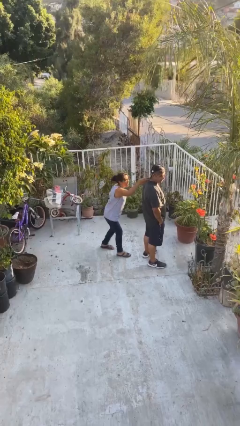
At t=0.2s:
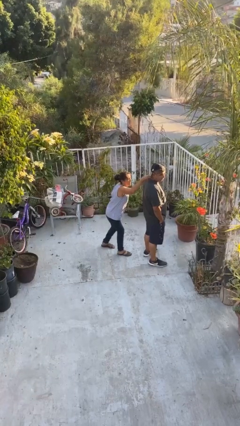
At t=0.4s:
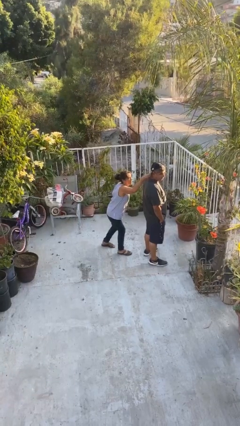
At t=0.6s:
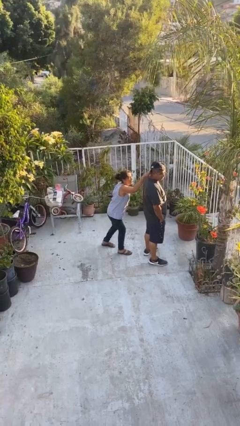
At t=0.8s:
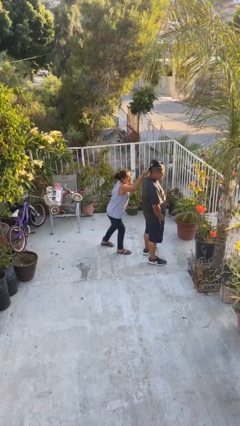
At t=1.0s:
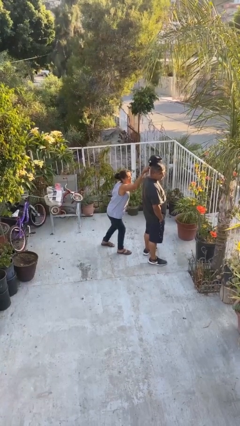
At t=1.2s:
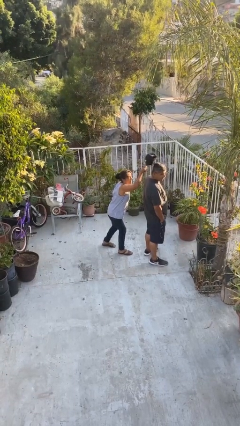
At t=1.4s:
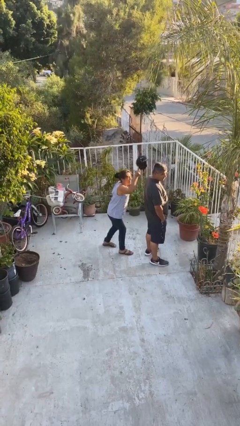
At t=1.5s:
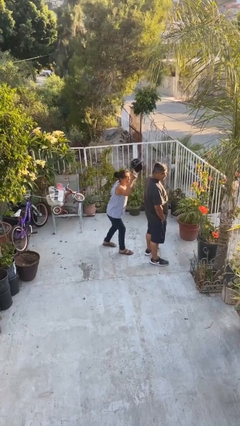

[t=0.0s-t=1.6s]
person steals object from person

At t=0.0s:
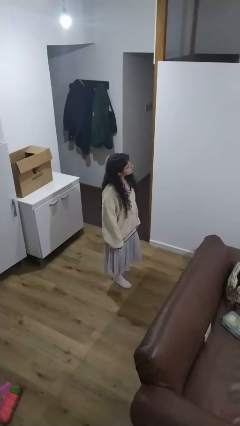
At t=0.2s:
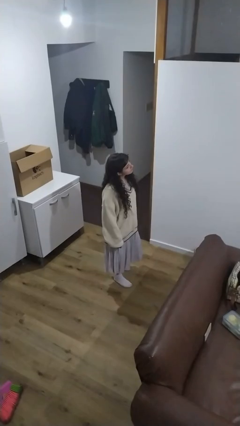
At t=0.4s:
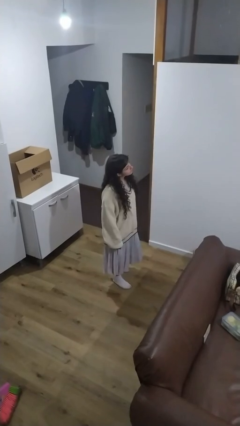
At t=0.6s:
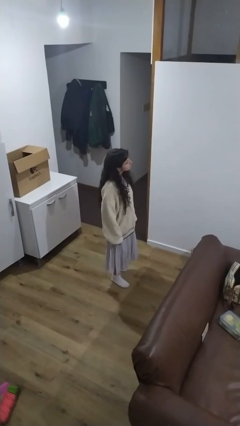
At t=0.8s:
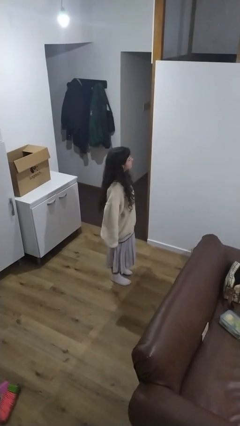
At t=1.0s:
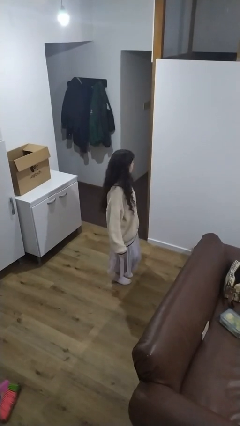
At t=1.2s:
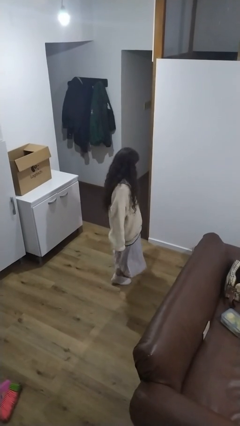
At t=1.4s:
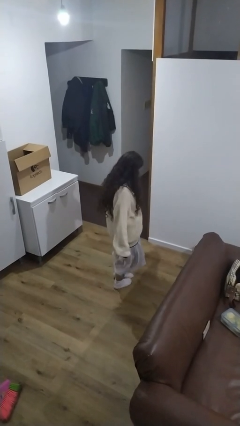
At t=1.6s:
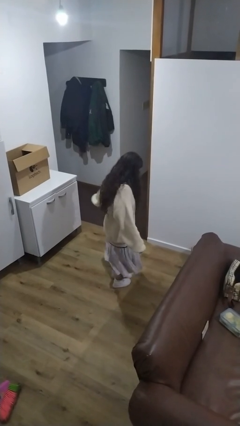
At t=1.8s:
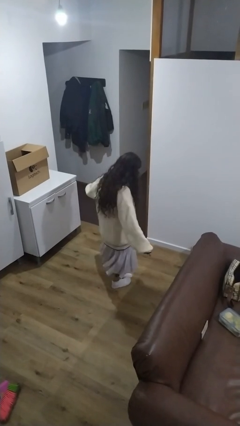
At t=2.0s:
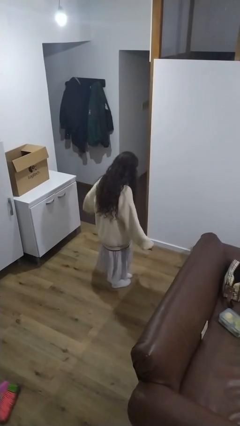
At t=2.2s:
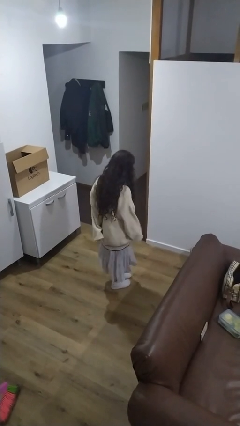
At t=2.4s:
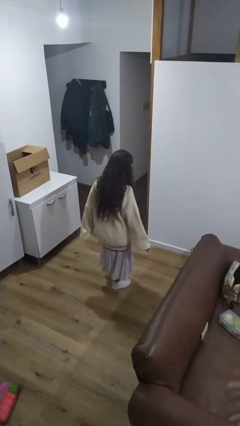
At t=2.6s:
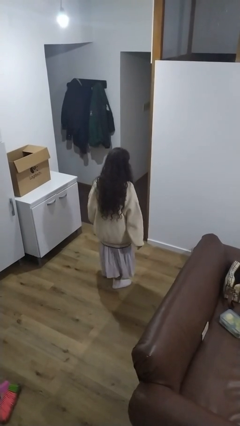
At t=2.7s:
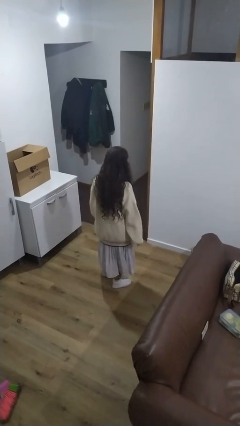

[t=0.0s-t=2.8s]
person wiggles hips

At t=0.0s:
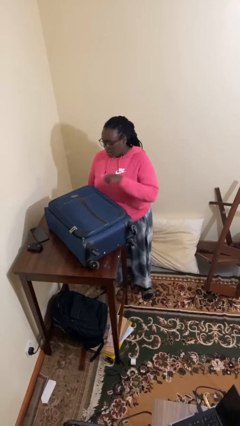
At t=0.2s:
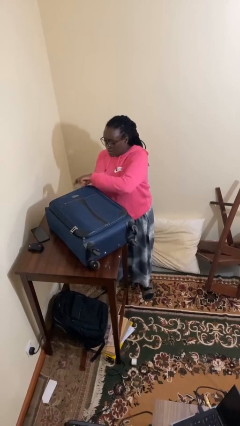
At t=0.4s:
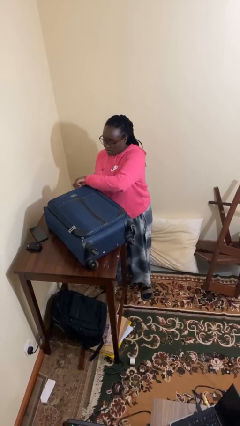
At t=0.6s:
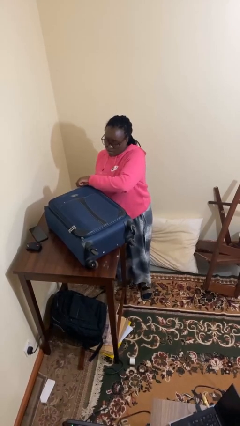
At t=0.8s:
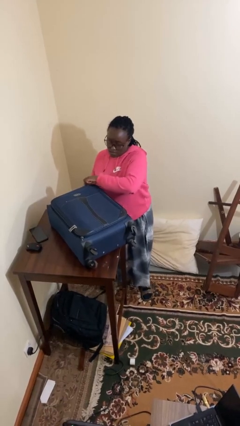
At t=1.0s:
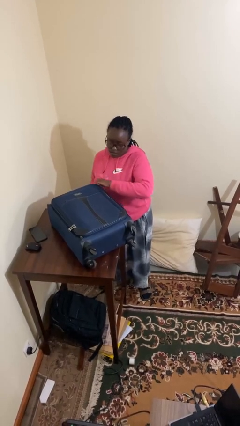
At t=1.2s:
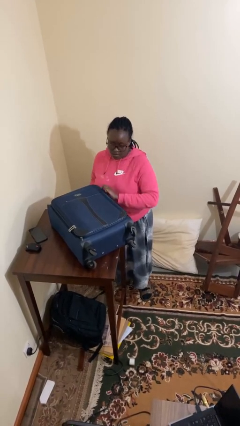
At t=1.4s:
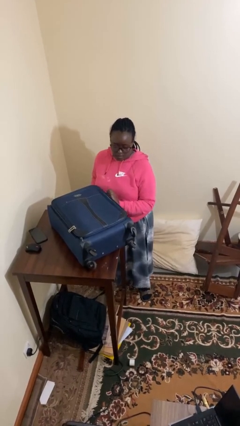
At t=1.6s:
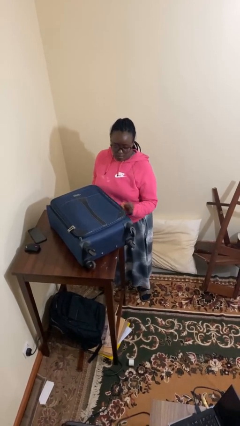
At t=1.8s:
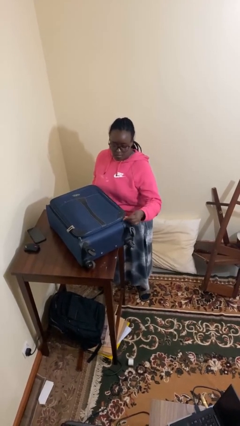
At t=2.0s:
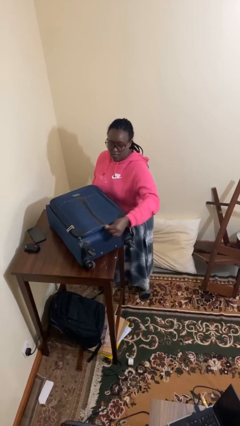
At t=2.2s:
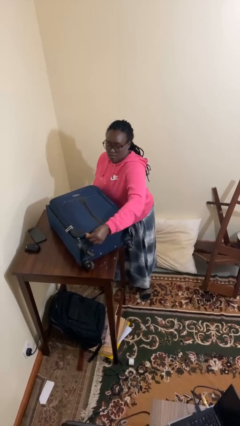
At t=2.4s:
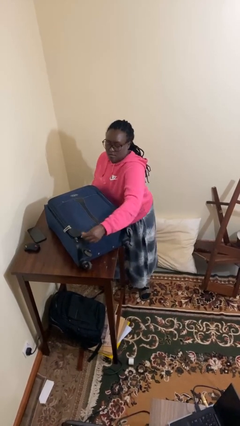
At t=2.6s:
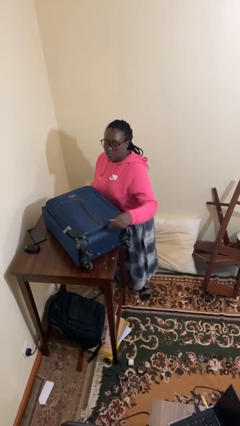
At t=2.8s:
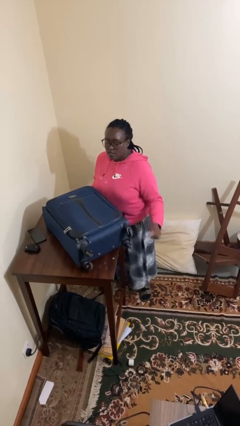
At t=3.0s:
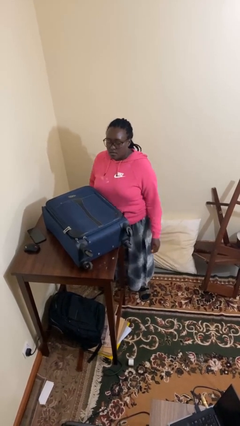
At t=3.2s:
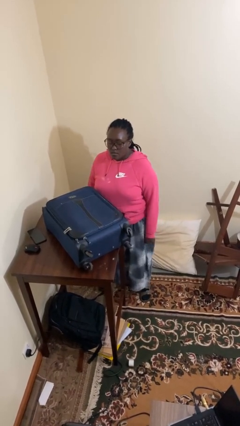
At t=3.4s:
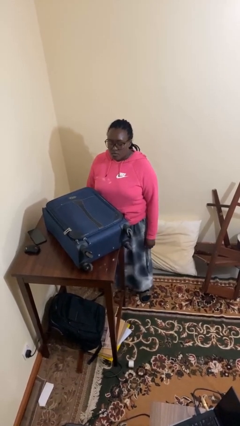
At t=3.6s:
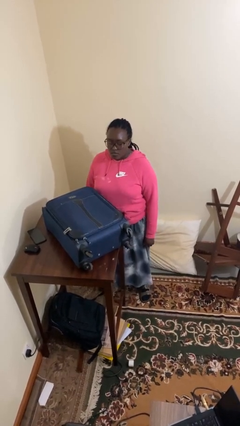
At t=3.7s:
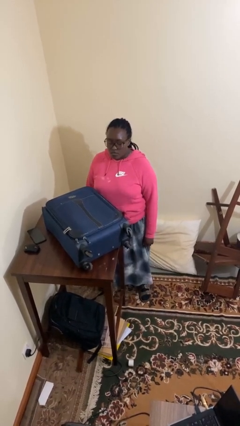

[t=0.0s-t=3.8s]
person closes suitcase

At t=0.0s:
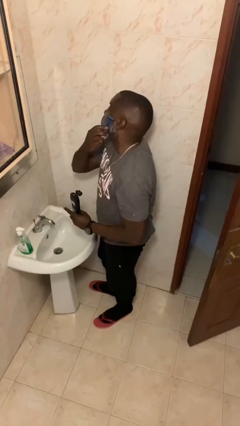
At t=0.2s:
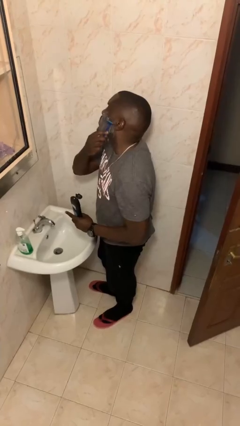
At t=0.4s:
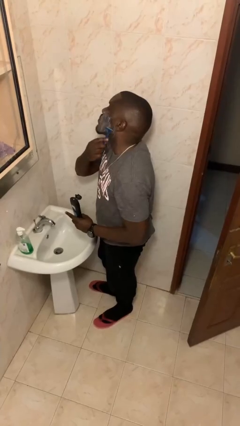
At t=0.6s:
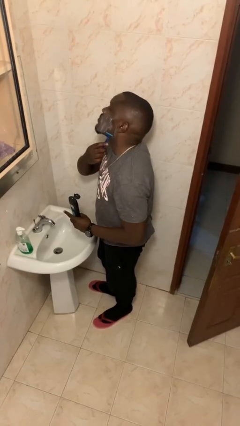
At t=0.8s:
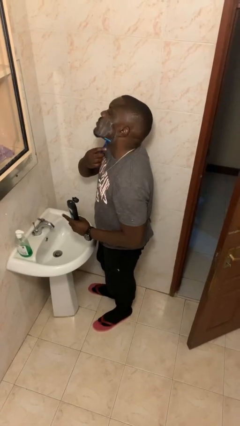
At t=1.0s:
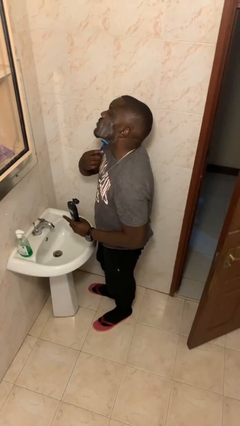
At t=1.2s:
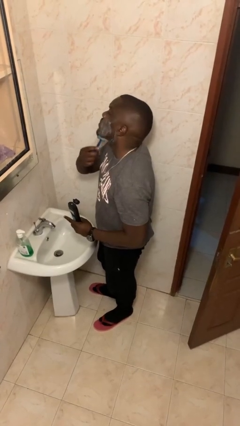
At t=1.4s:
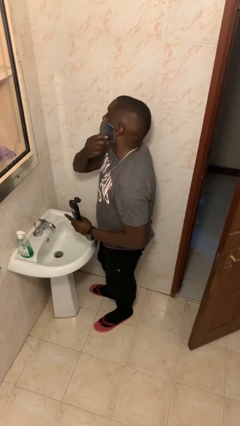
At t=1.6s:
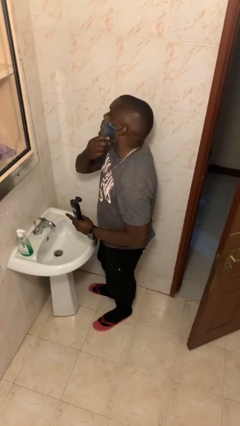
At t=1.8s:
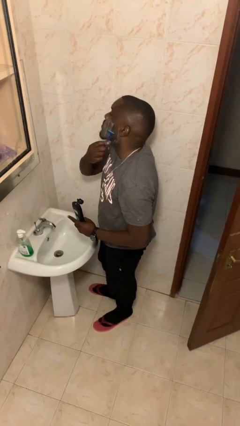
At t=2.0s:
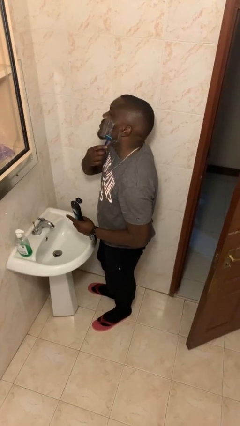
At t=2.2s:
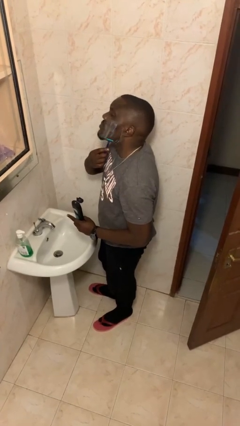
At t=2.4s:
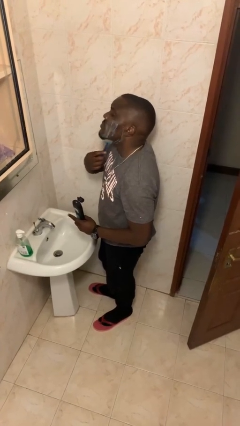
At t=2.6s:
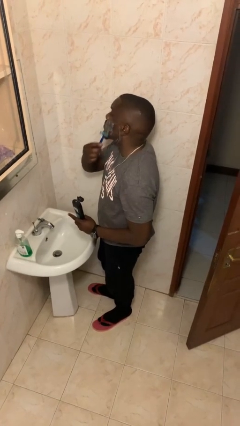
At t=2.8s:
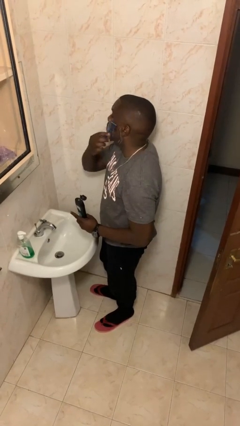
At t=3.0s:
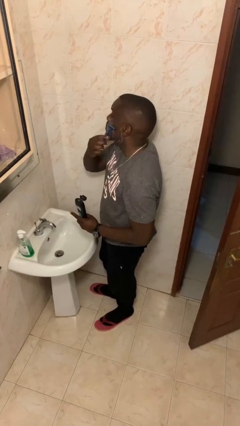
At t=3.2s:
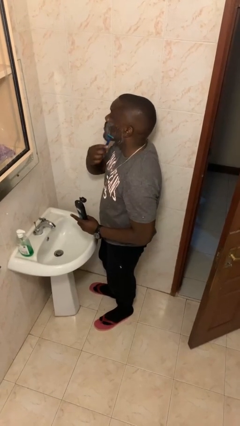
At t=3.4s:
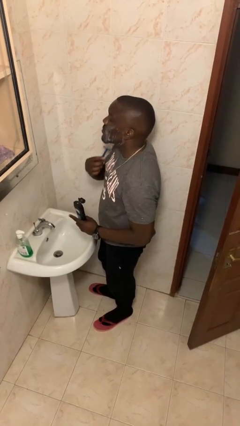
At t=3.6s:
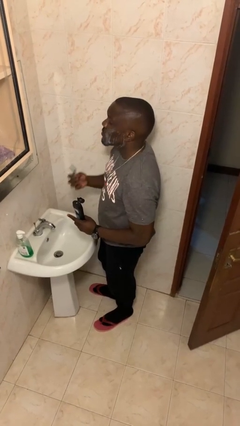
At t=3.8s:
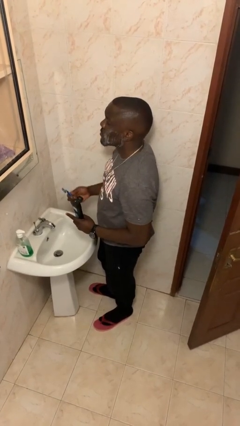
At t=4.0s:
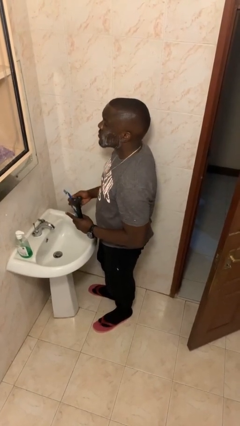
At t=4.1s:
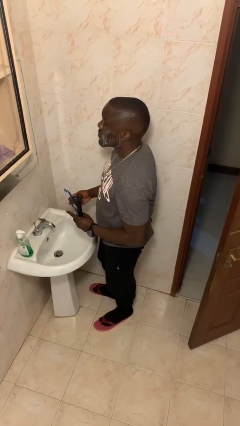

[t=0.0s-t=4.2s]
person shaves face

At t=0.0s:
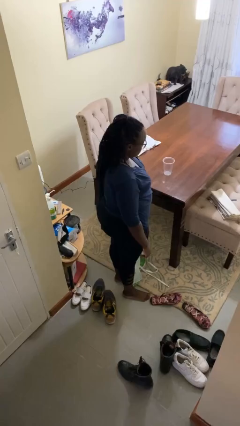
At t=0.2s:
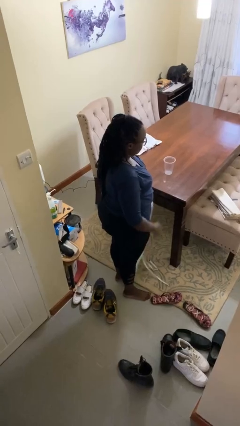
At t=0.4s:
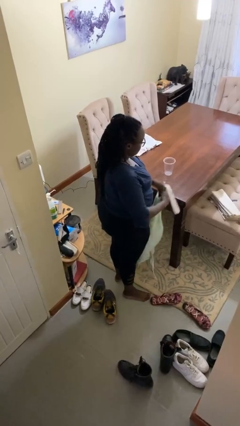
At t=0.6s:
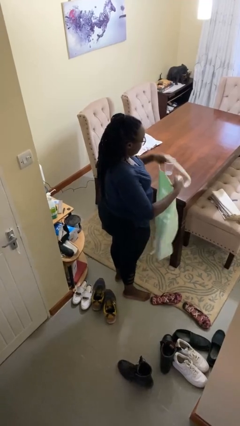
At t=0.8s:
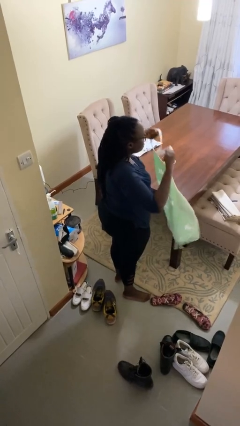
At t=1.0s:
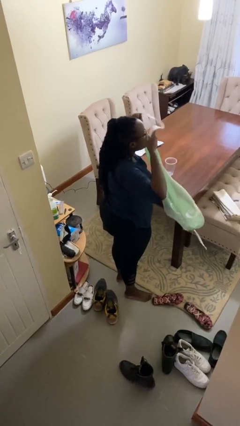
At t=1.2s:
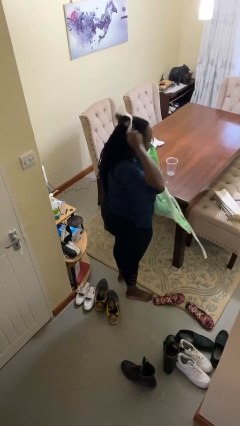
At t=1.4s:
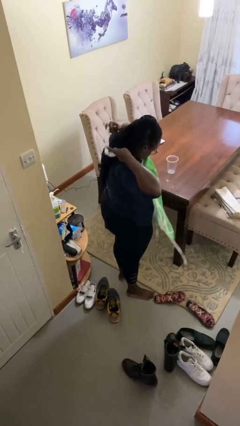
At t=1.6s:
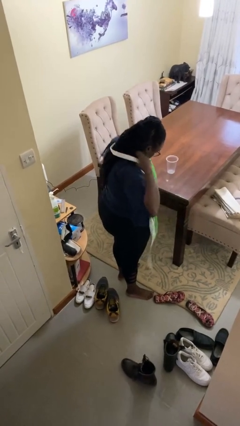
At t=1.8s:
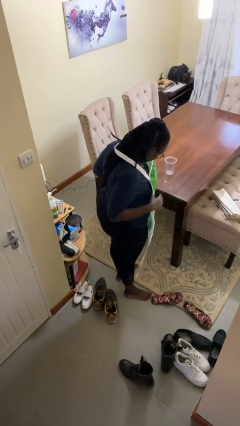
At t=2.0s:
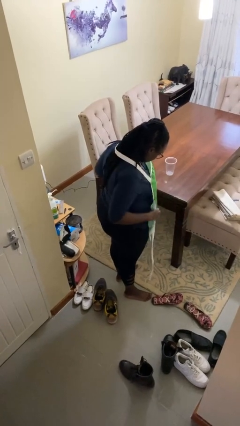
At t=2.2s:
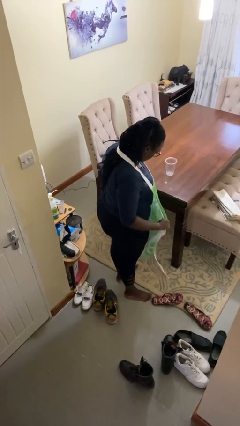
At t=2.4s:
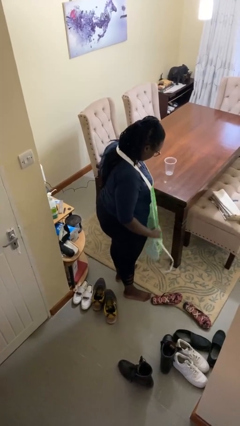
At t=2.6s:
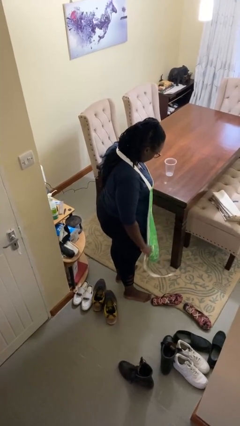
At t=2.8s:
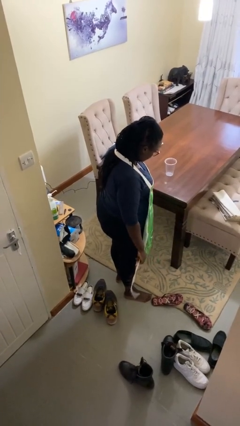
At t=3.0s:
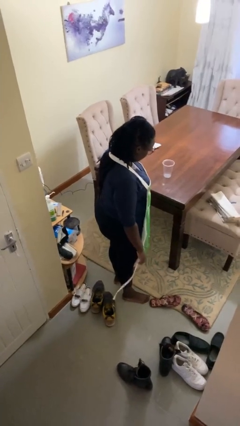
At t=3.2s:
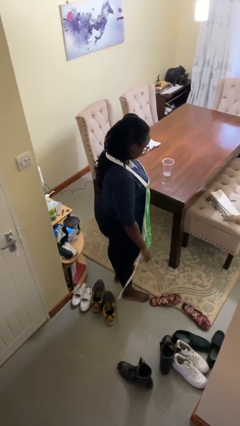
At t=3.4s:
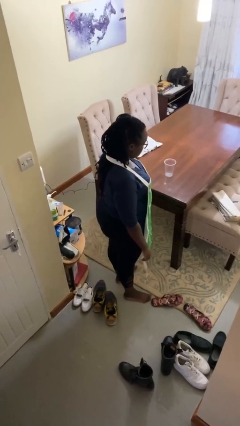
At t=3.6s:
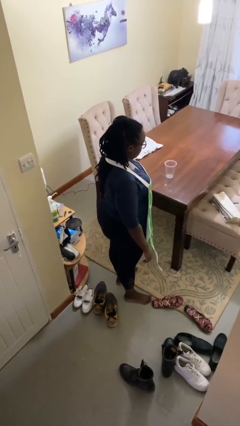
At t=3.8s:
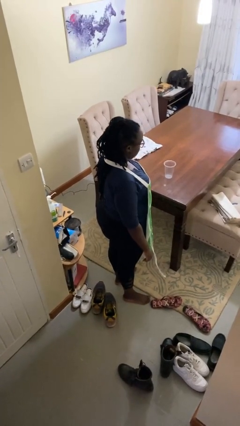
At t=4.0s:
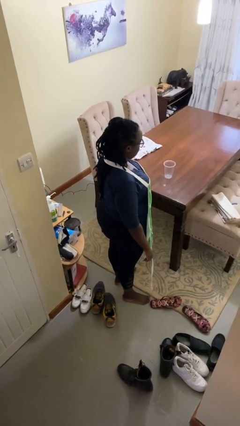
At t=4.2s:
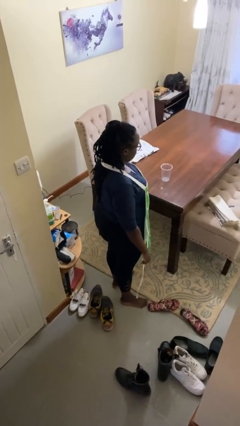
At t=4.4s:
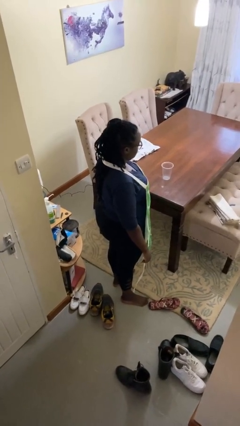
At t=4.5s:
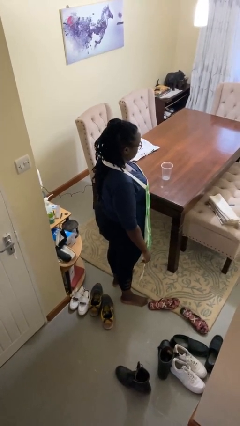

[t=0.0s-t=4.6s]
person puts on apron

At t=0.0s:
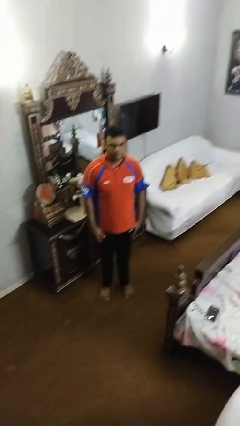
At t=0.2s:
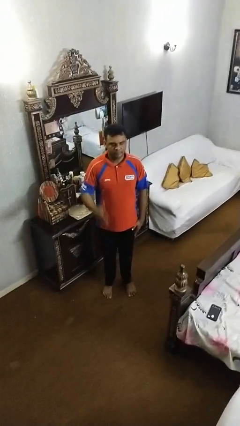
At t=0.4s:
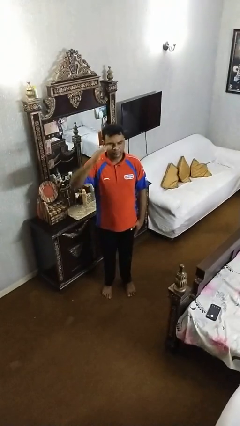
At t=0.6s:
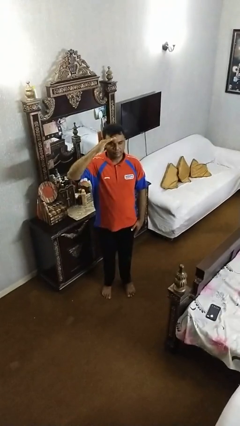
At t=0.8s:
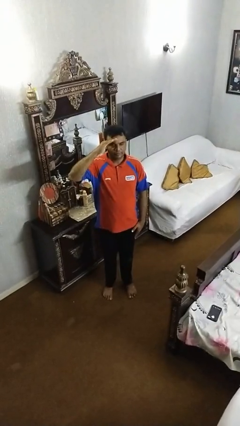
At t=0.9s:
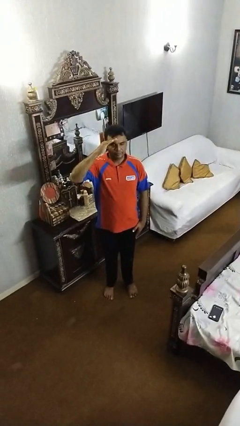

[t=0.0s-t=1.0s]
person salutes
